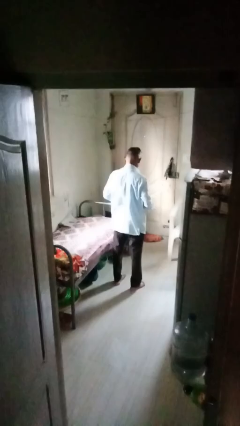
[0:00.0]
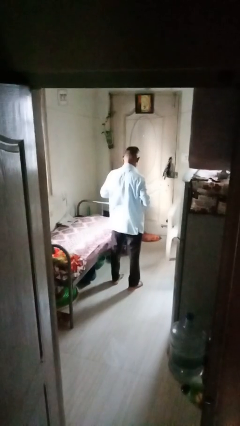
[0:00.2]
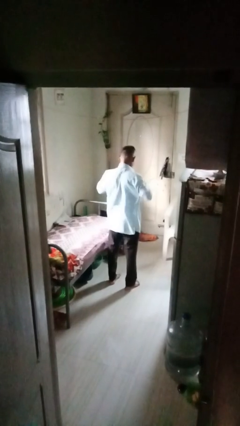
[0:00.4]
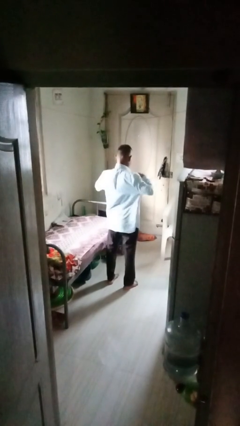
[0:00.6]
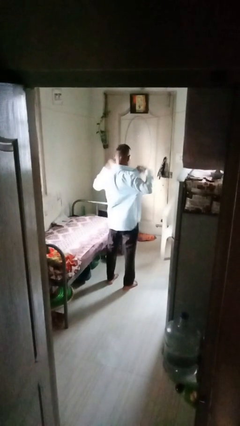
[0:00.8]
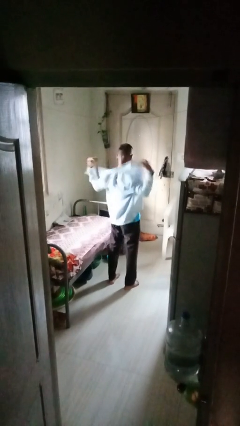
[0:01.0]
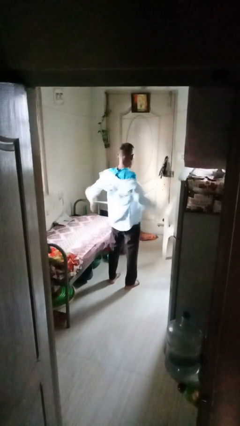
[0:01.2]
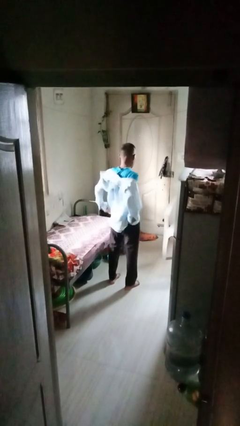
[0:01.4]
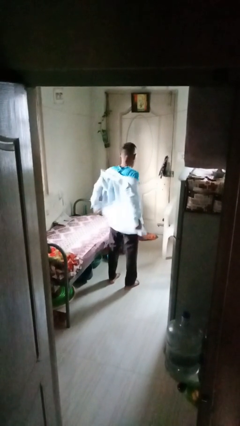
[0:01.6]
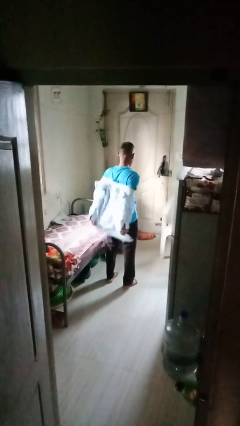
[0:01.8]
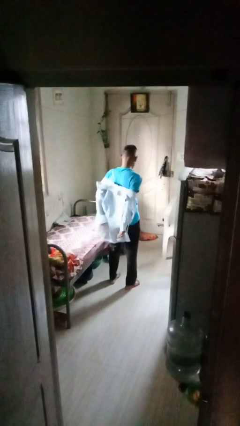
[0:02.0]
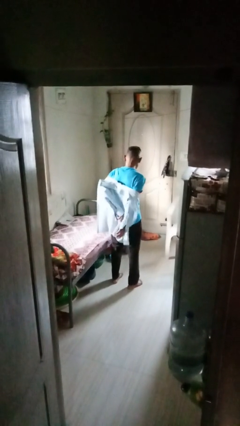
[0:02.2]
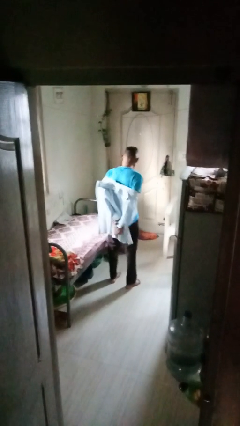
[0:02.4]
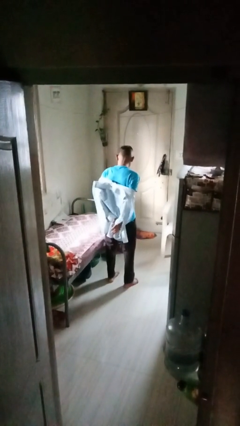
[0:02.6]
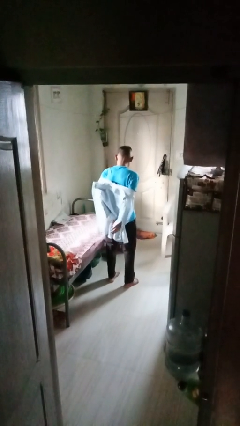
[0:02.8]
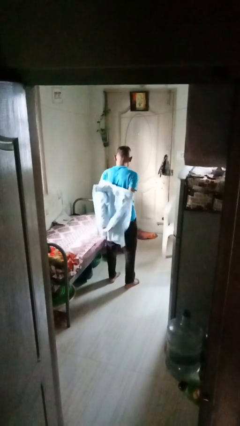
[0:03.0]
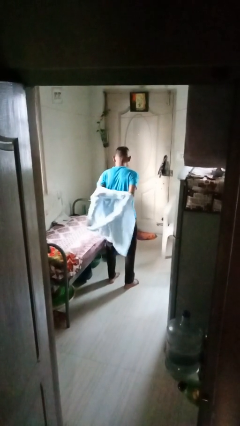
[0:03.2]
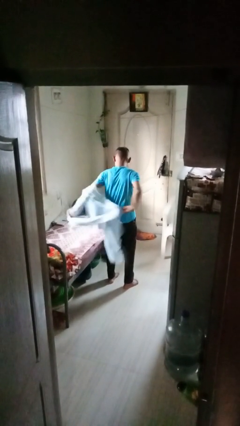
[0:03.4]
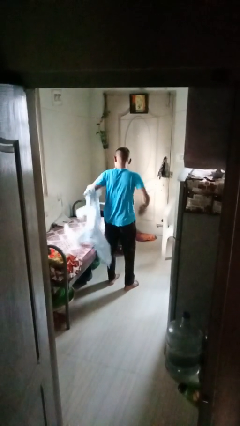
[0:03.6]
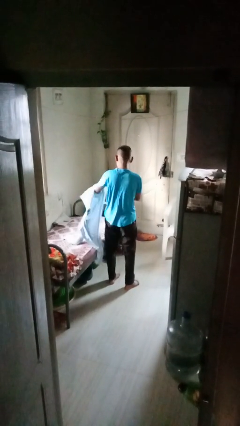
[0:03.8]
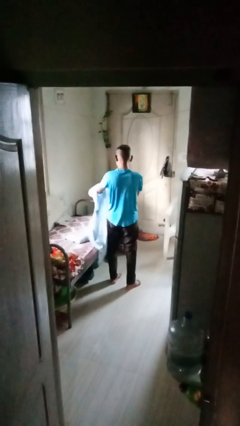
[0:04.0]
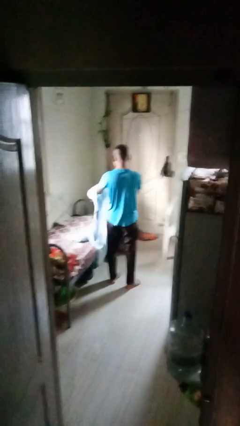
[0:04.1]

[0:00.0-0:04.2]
person takes off shirt

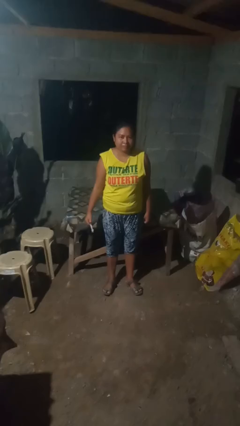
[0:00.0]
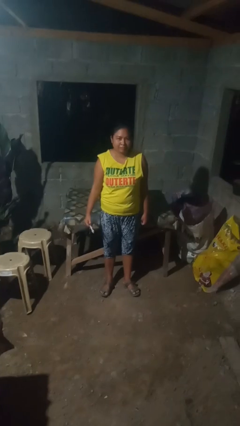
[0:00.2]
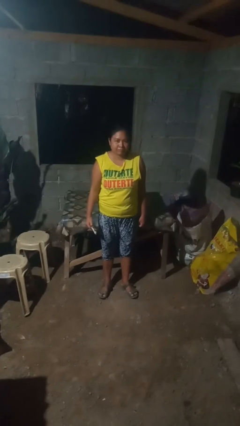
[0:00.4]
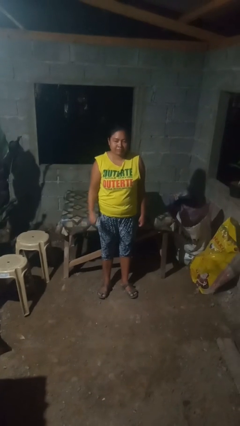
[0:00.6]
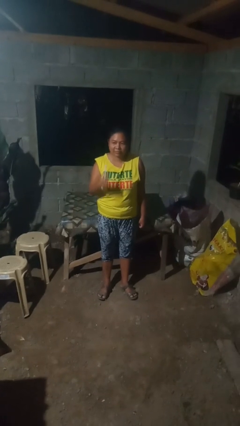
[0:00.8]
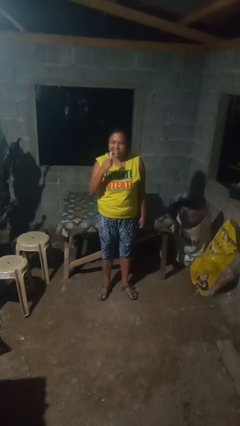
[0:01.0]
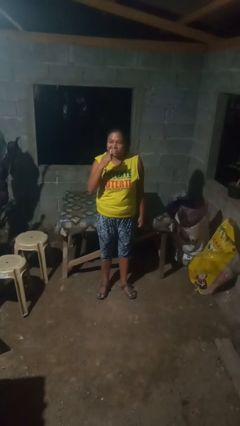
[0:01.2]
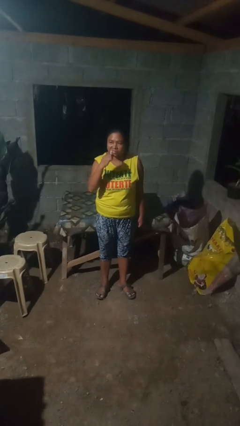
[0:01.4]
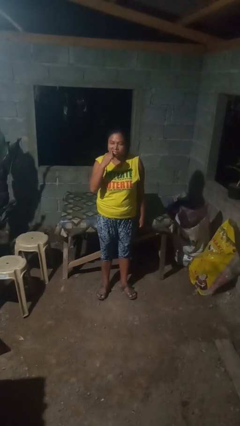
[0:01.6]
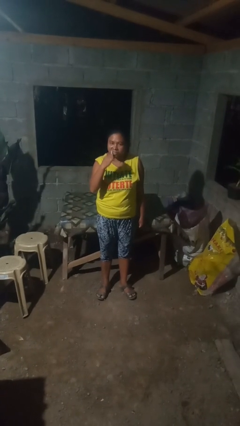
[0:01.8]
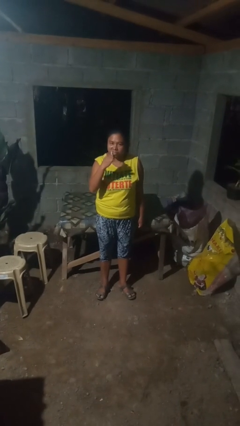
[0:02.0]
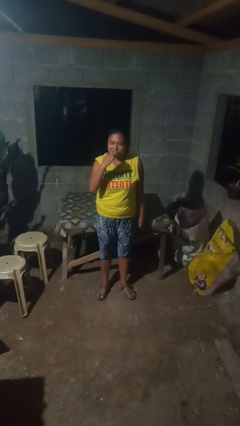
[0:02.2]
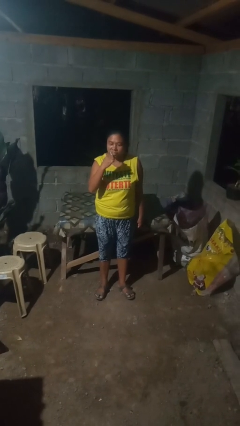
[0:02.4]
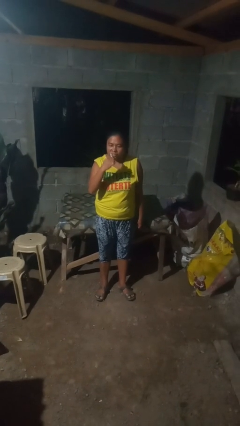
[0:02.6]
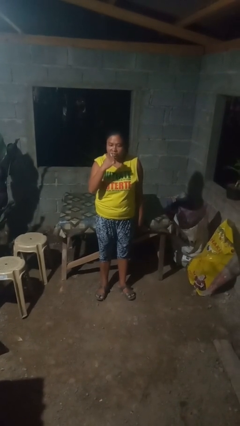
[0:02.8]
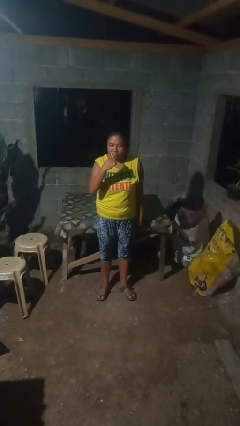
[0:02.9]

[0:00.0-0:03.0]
person brushes teeth

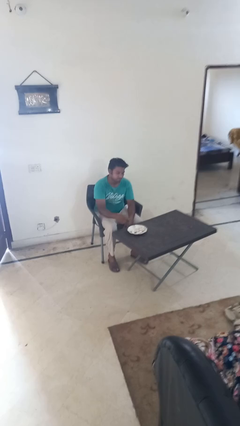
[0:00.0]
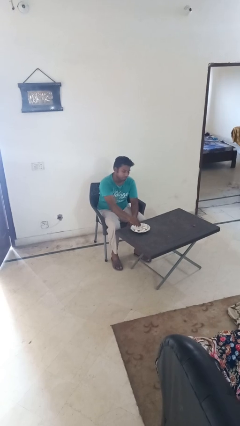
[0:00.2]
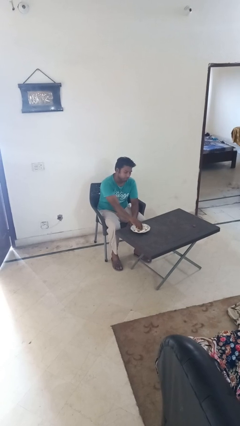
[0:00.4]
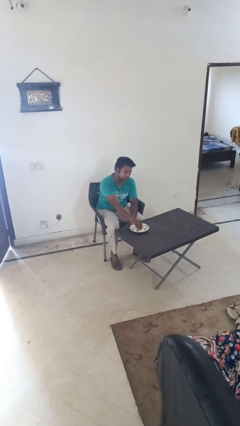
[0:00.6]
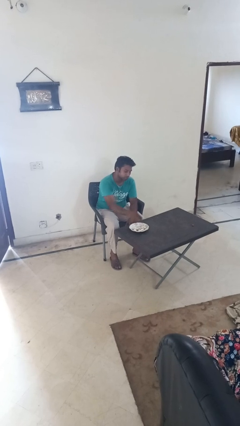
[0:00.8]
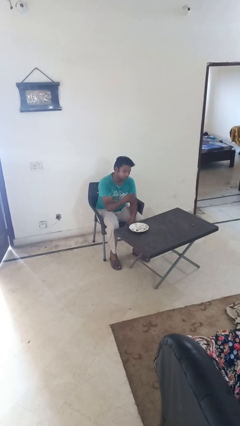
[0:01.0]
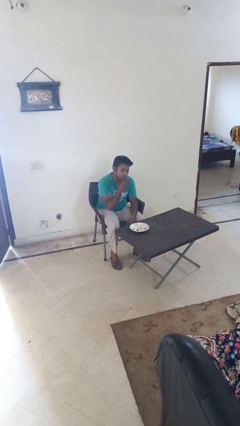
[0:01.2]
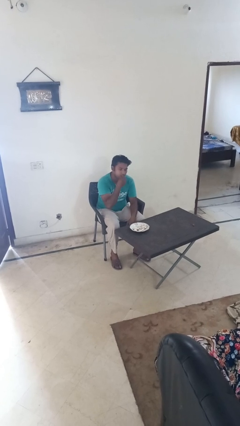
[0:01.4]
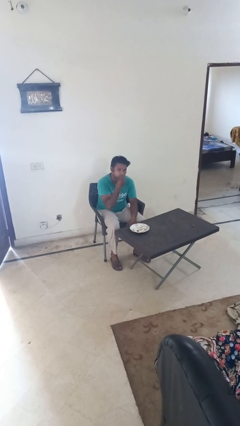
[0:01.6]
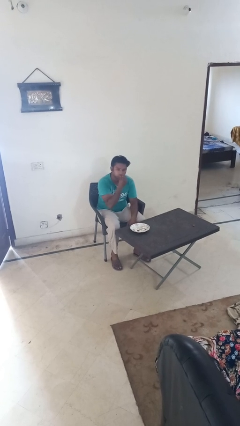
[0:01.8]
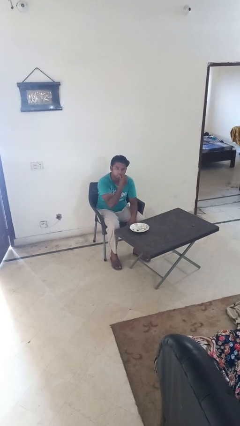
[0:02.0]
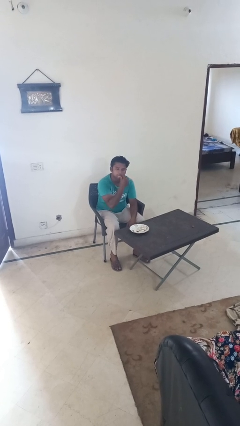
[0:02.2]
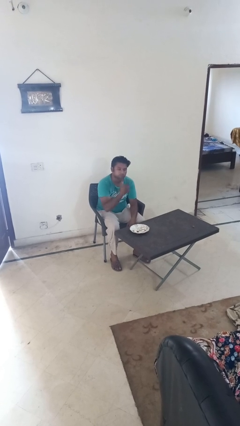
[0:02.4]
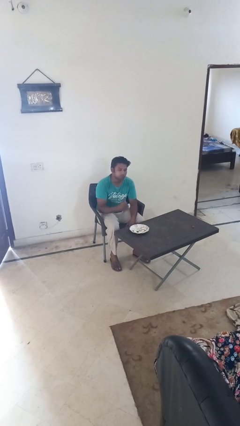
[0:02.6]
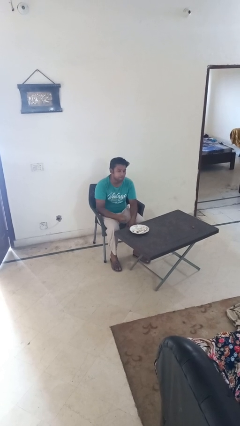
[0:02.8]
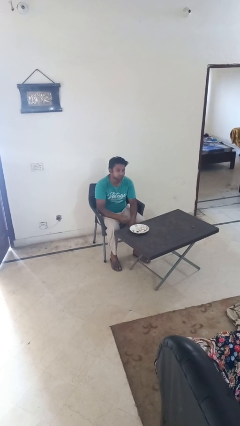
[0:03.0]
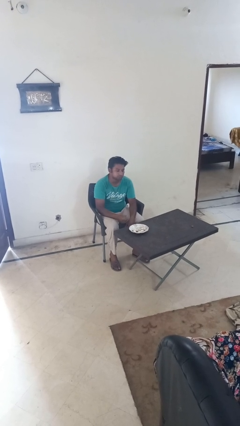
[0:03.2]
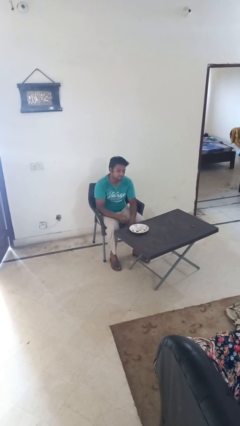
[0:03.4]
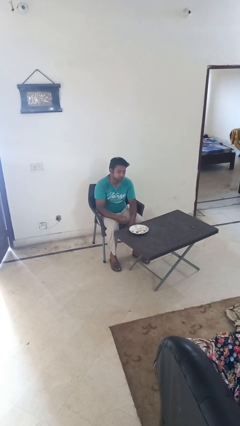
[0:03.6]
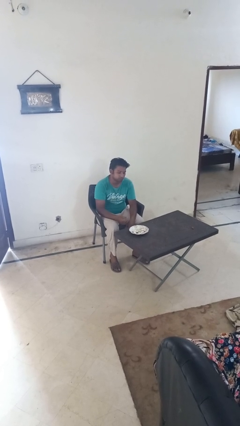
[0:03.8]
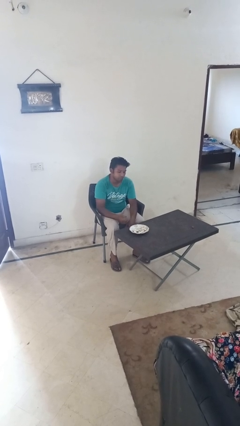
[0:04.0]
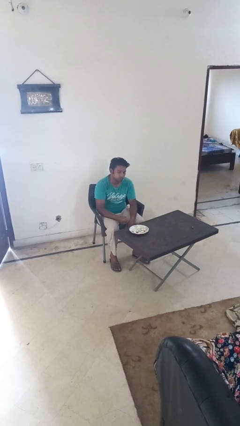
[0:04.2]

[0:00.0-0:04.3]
person eats with hands

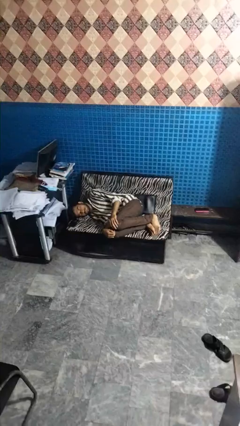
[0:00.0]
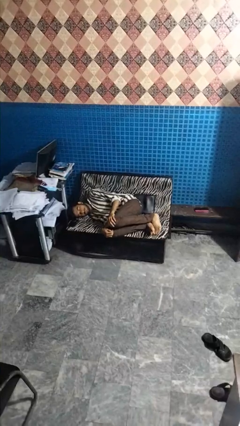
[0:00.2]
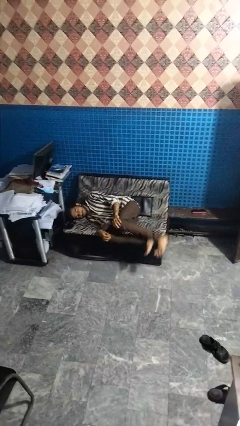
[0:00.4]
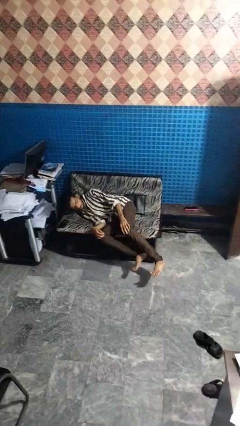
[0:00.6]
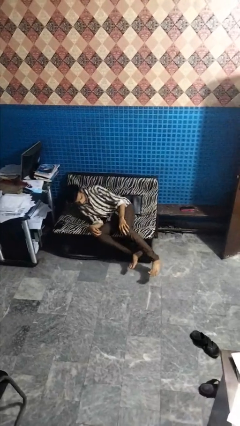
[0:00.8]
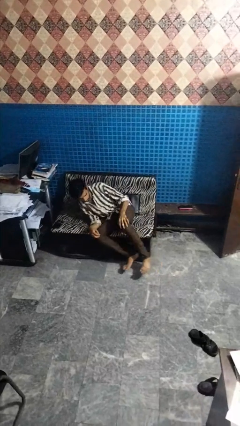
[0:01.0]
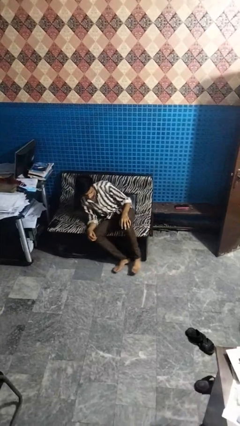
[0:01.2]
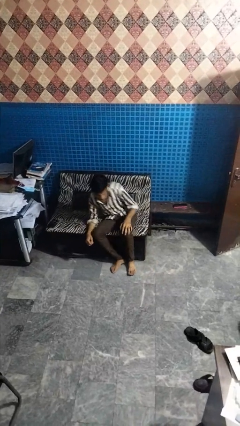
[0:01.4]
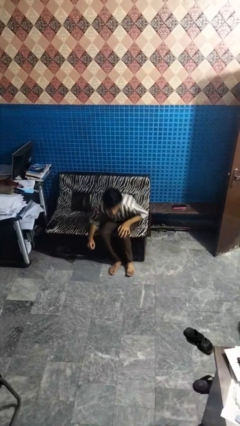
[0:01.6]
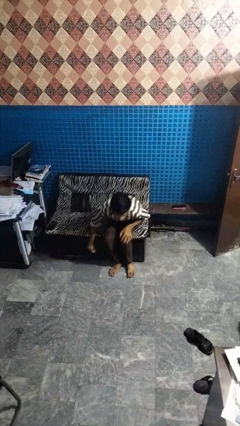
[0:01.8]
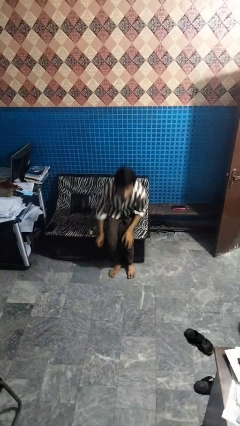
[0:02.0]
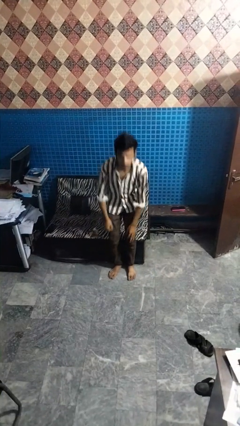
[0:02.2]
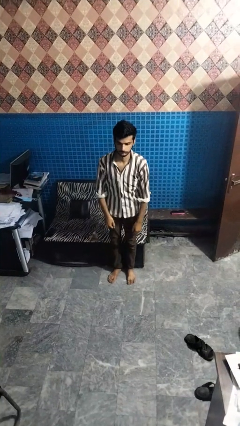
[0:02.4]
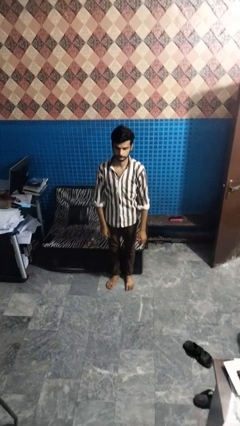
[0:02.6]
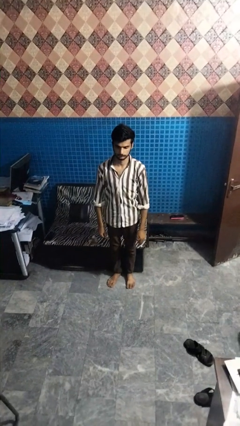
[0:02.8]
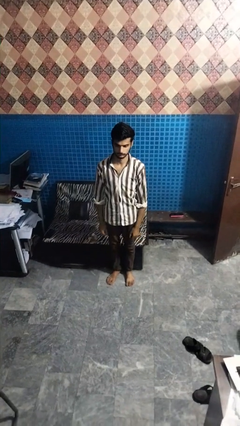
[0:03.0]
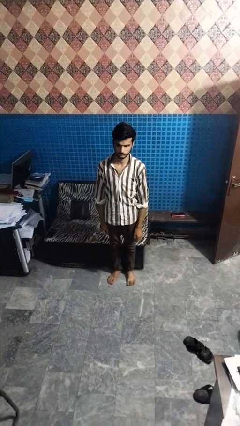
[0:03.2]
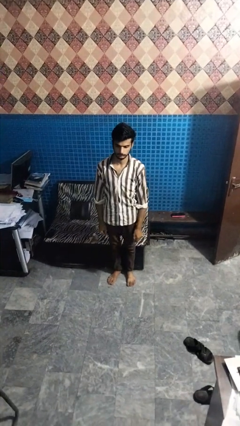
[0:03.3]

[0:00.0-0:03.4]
person stands up

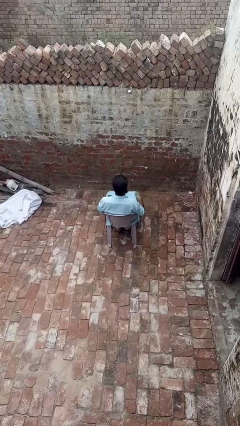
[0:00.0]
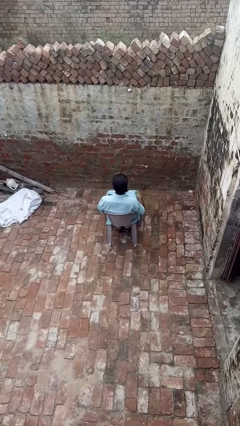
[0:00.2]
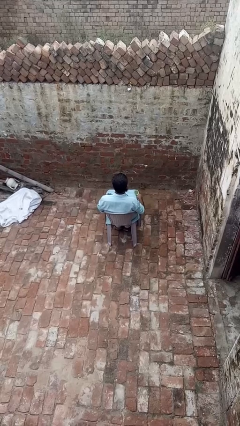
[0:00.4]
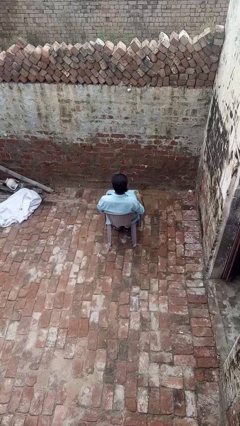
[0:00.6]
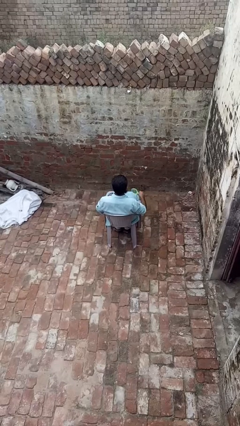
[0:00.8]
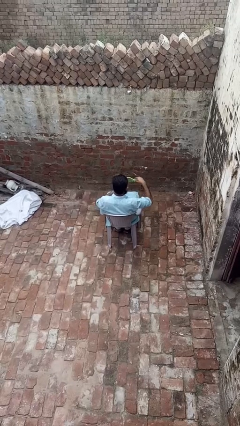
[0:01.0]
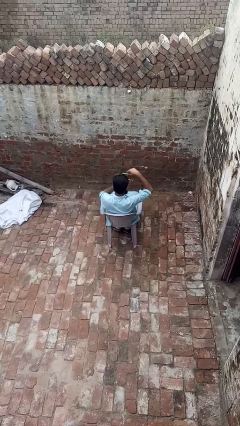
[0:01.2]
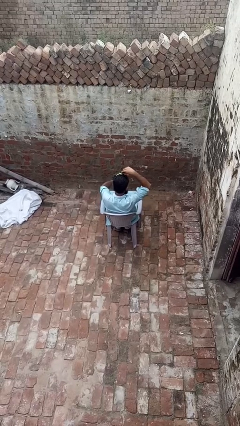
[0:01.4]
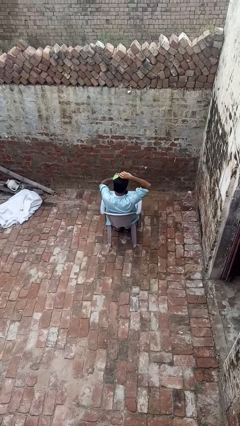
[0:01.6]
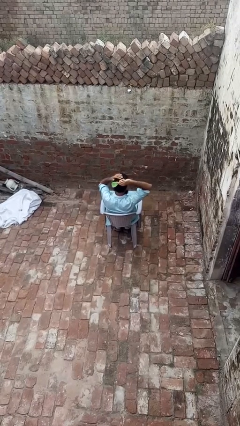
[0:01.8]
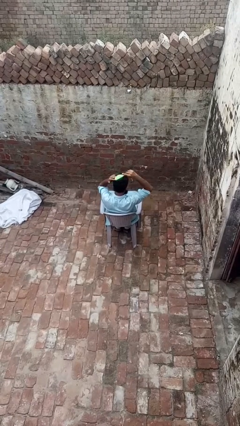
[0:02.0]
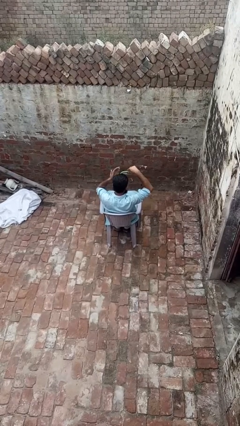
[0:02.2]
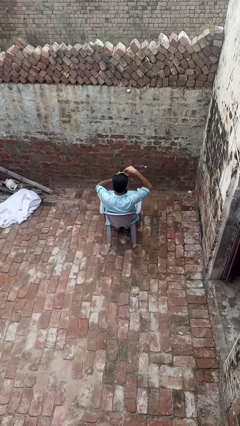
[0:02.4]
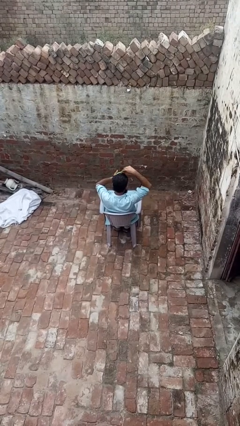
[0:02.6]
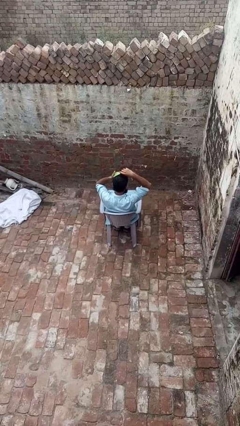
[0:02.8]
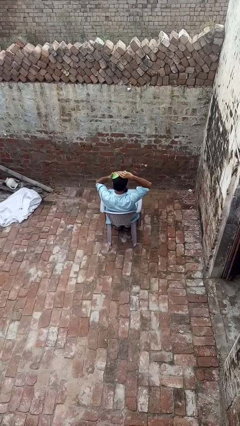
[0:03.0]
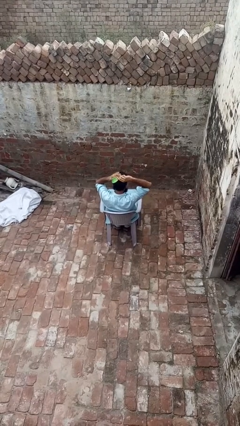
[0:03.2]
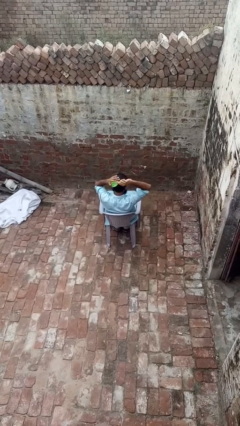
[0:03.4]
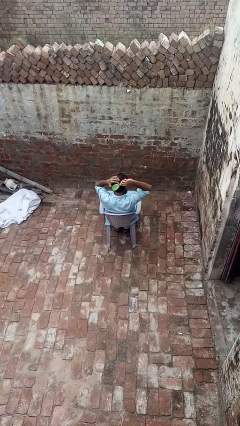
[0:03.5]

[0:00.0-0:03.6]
person brushes hair
